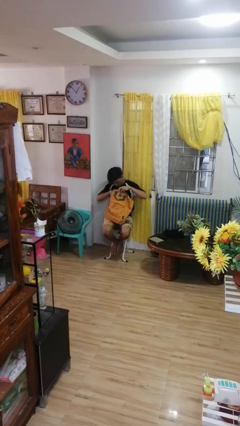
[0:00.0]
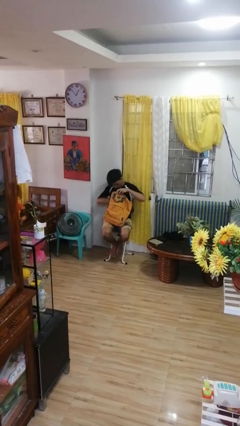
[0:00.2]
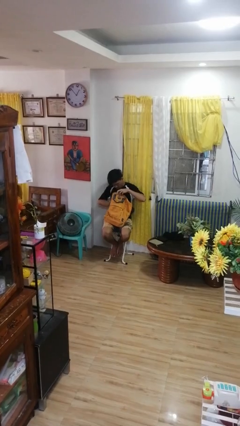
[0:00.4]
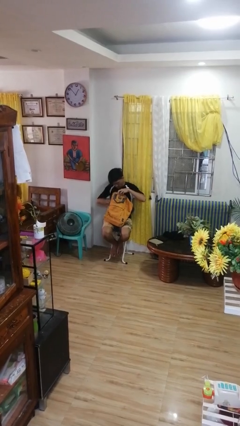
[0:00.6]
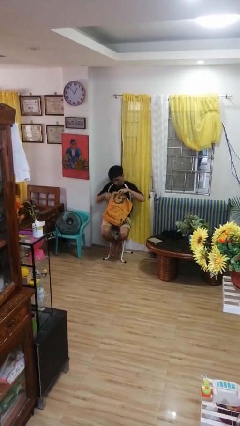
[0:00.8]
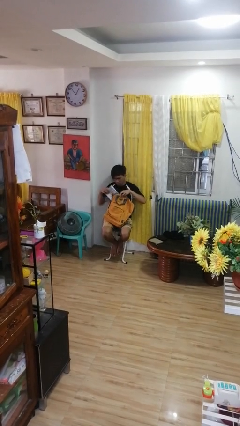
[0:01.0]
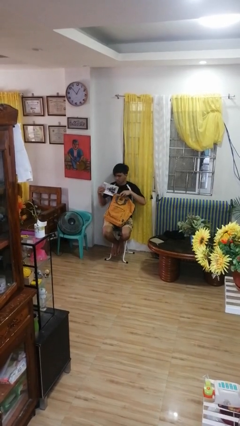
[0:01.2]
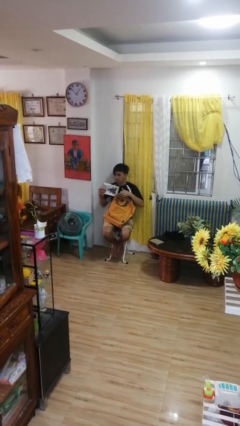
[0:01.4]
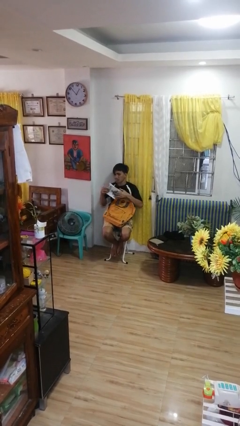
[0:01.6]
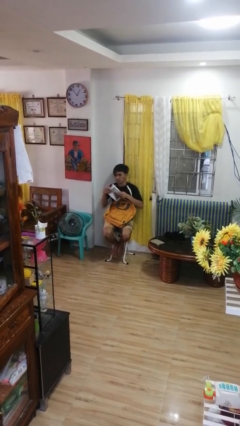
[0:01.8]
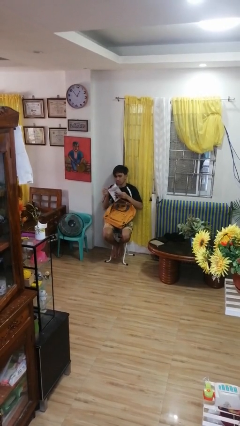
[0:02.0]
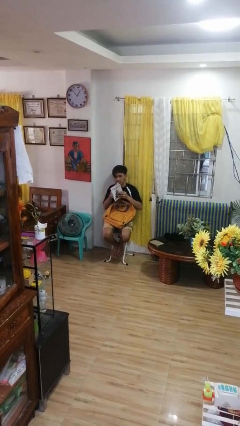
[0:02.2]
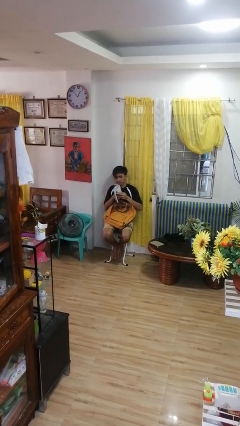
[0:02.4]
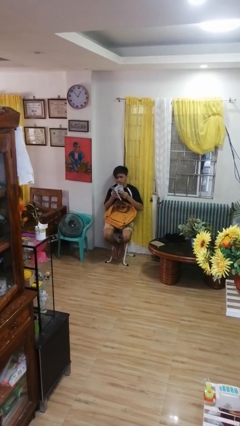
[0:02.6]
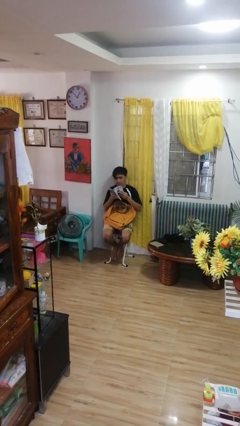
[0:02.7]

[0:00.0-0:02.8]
person takes object from backpack

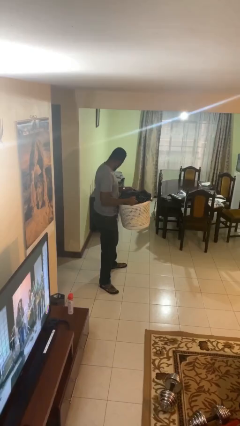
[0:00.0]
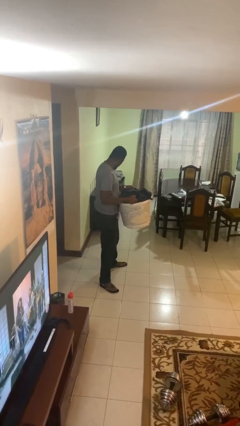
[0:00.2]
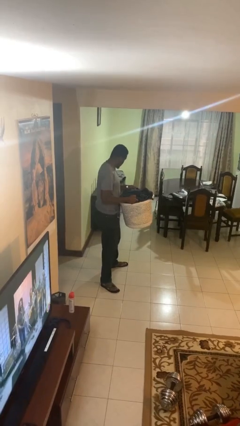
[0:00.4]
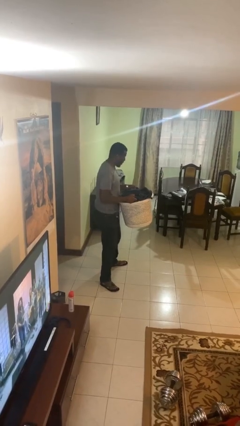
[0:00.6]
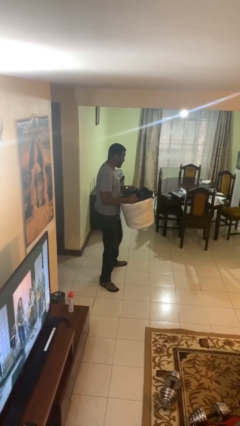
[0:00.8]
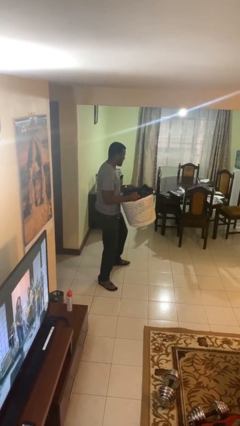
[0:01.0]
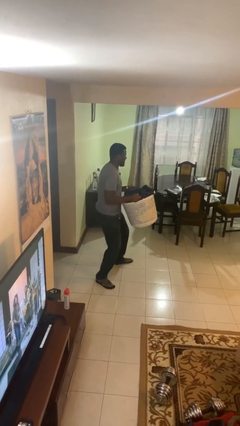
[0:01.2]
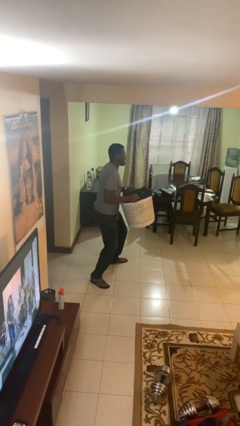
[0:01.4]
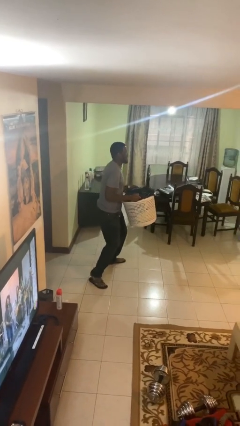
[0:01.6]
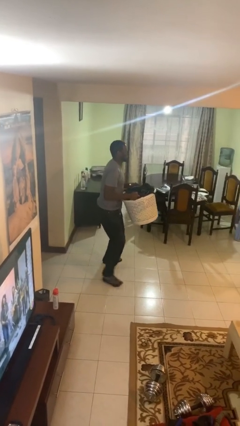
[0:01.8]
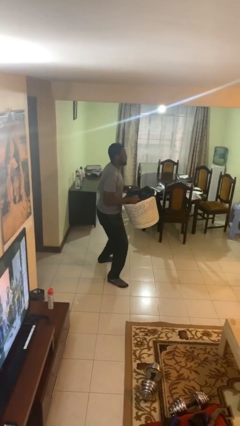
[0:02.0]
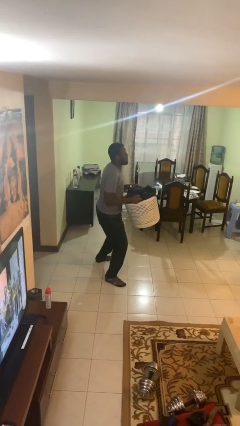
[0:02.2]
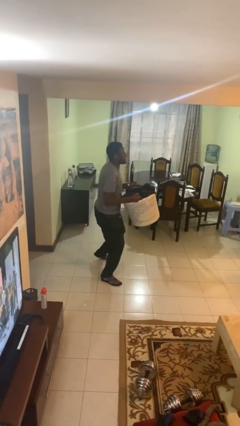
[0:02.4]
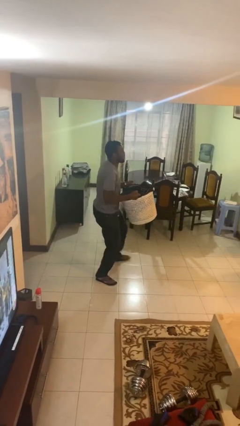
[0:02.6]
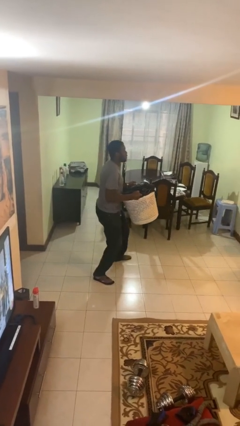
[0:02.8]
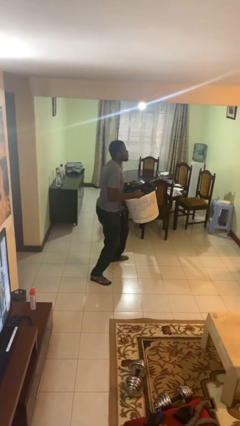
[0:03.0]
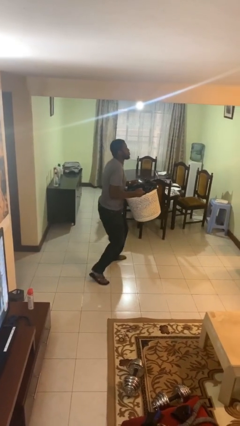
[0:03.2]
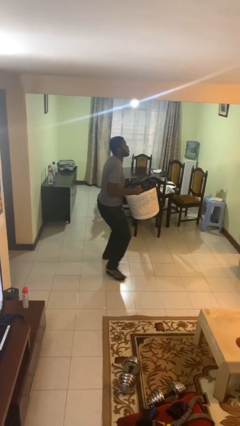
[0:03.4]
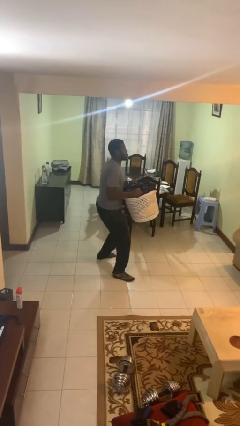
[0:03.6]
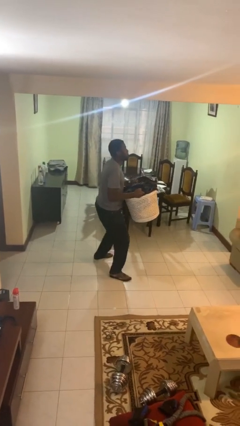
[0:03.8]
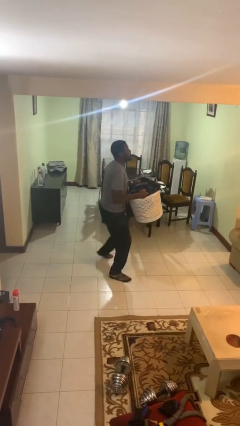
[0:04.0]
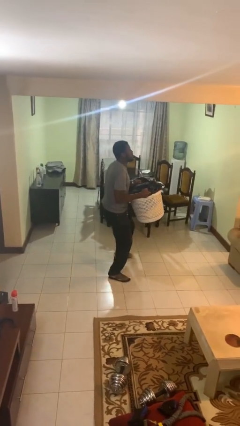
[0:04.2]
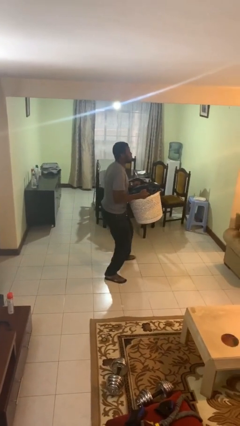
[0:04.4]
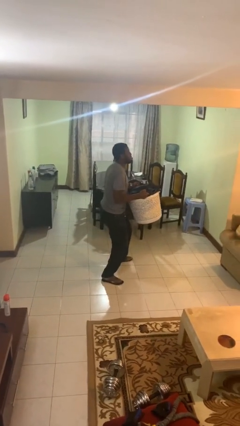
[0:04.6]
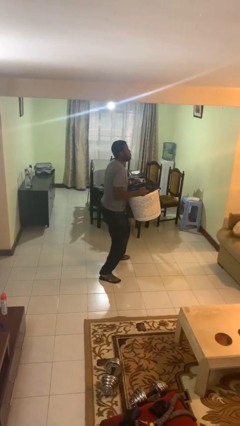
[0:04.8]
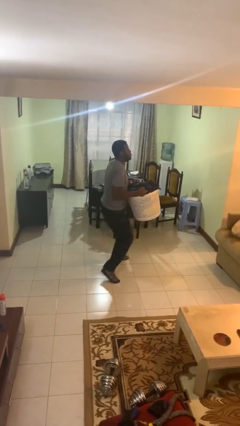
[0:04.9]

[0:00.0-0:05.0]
person carries heavy object

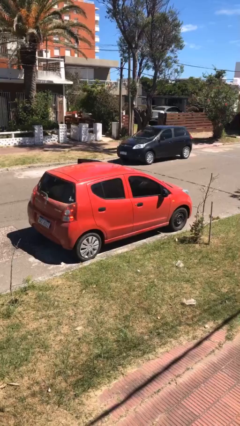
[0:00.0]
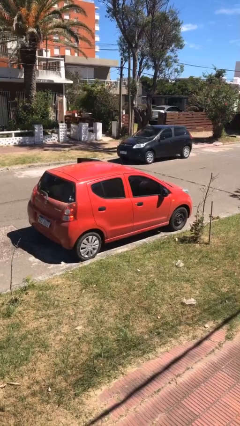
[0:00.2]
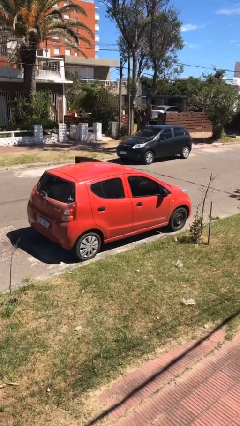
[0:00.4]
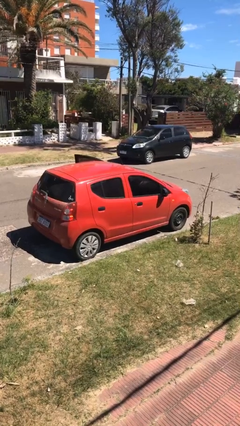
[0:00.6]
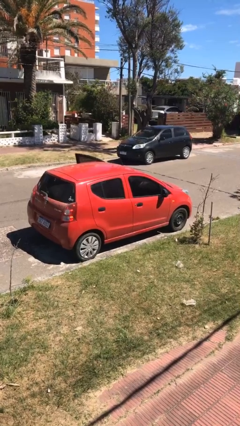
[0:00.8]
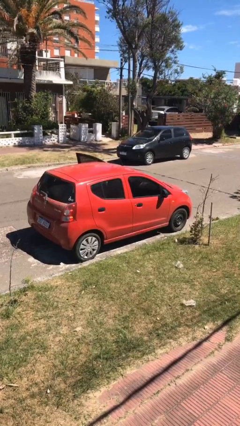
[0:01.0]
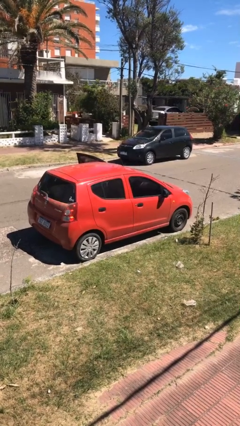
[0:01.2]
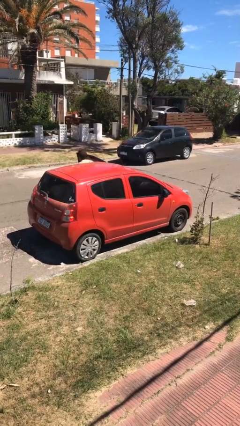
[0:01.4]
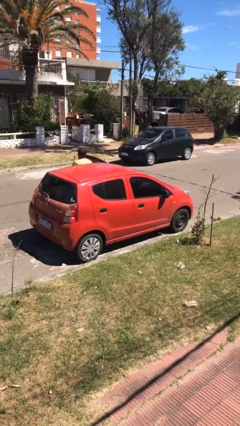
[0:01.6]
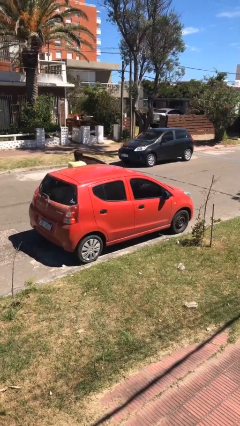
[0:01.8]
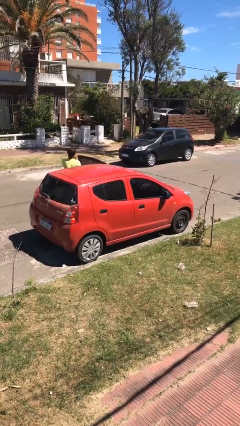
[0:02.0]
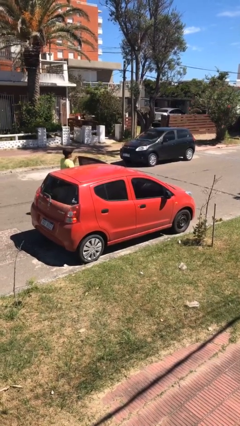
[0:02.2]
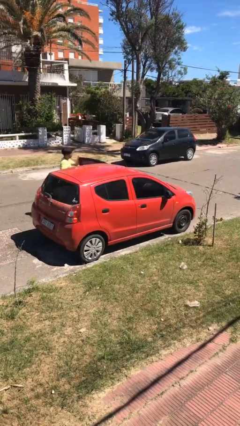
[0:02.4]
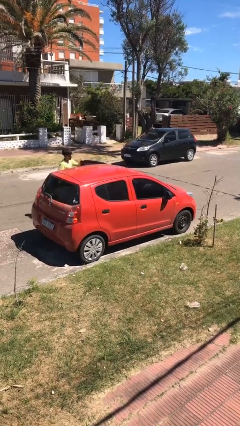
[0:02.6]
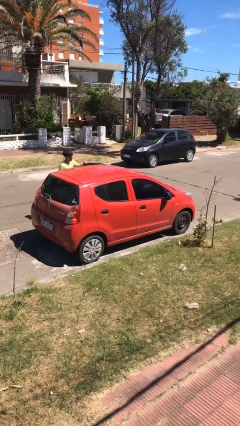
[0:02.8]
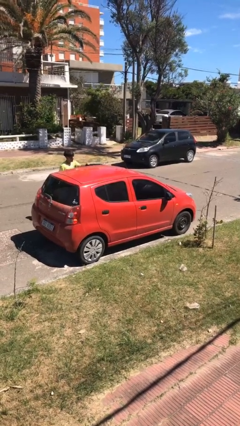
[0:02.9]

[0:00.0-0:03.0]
car drops off person

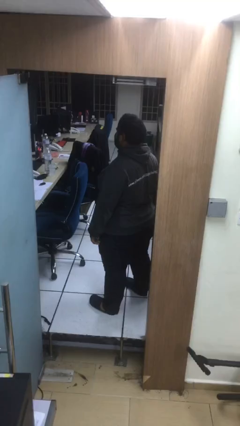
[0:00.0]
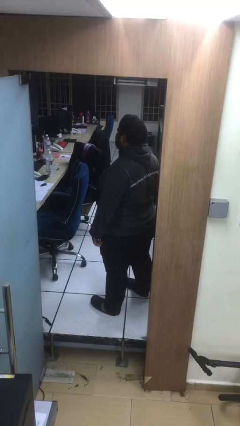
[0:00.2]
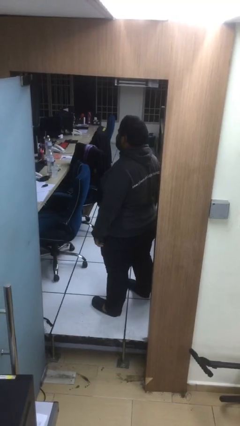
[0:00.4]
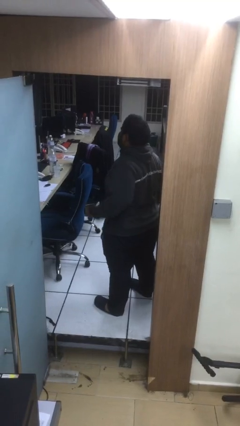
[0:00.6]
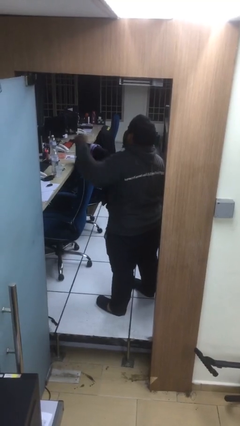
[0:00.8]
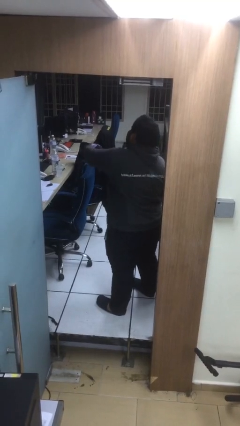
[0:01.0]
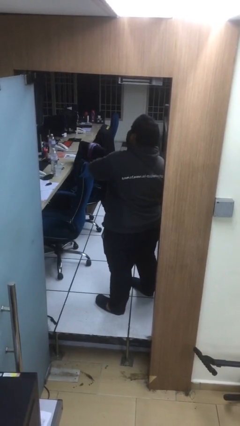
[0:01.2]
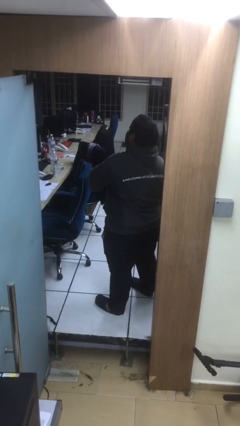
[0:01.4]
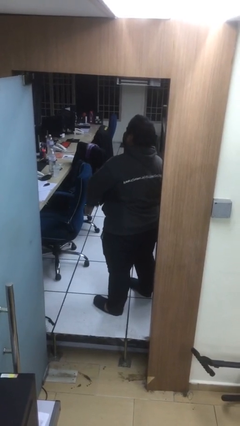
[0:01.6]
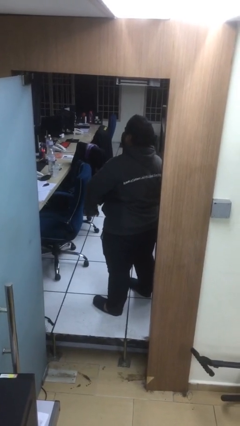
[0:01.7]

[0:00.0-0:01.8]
person punches

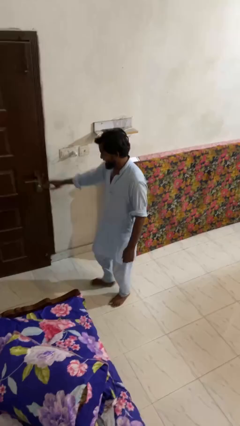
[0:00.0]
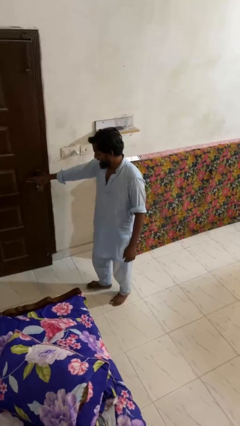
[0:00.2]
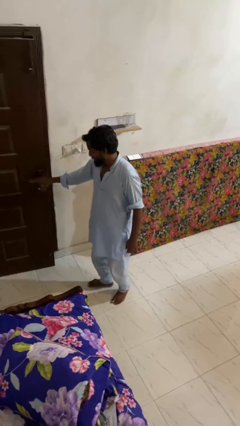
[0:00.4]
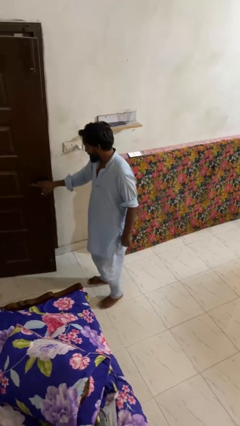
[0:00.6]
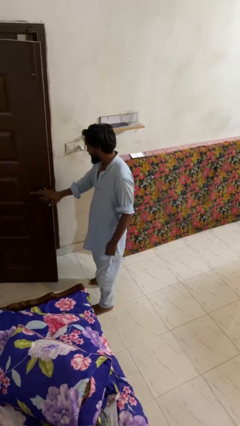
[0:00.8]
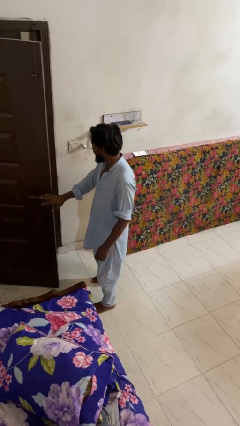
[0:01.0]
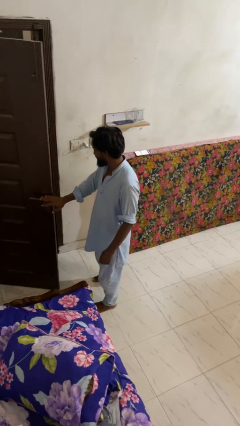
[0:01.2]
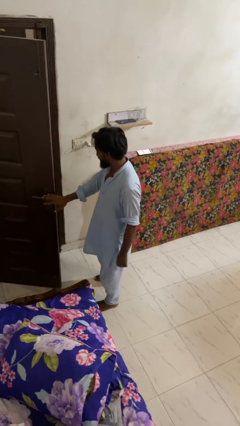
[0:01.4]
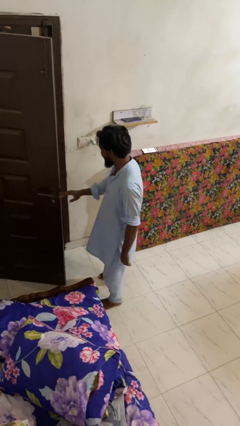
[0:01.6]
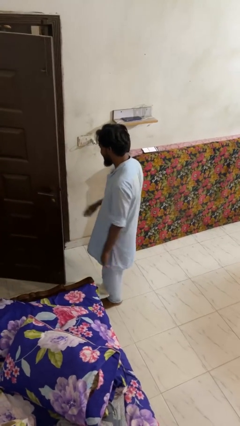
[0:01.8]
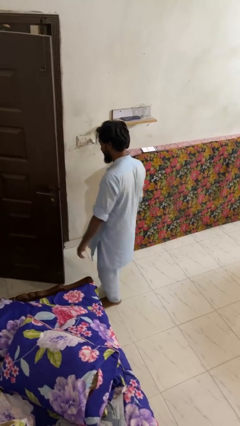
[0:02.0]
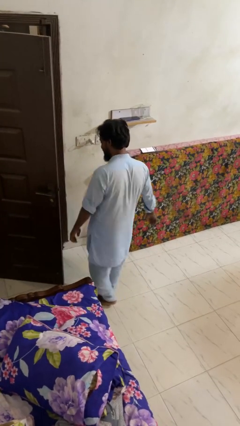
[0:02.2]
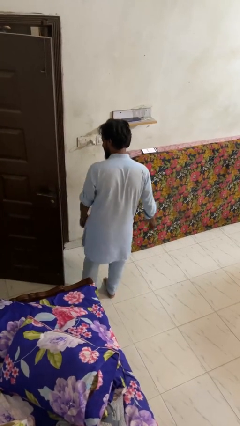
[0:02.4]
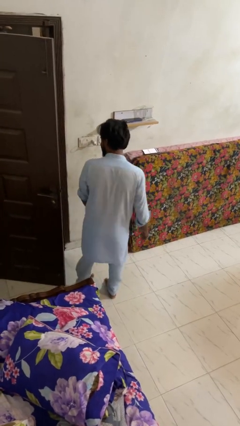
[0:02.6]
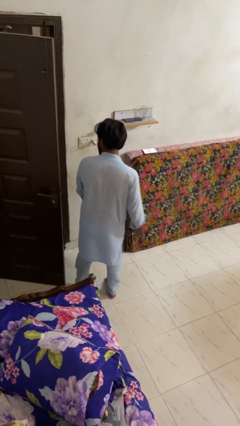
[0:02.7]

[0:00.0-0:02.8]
person opens facility door

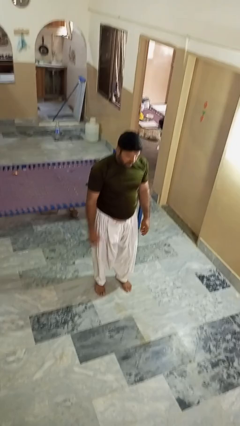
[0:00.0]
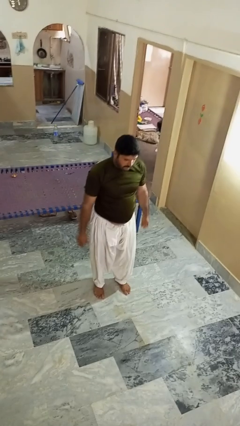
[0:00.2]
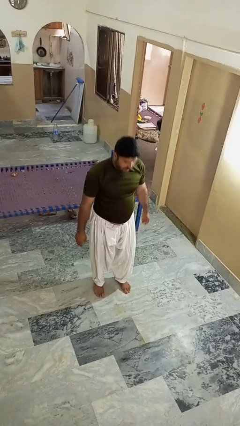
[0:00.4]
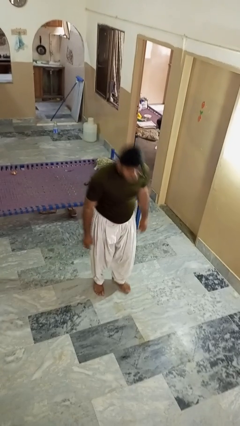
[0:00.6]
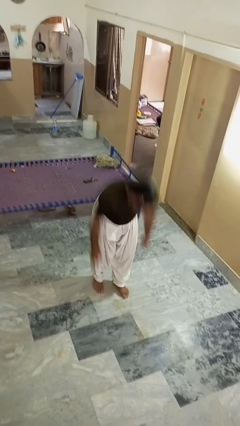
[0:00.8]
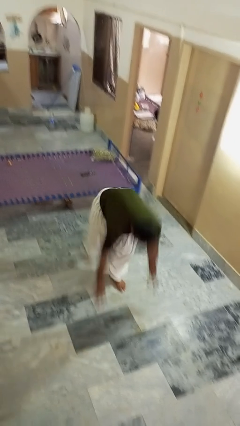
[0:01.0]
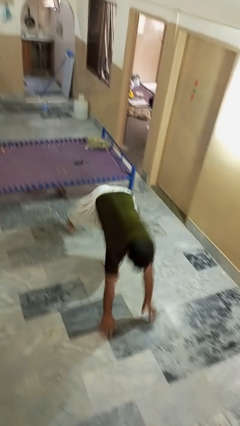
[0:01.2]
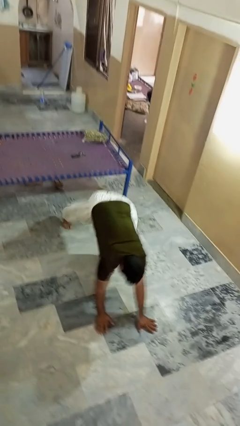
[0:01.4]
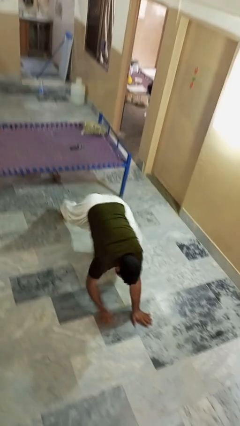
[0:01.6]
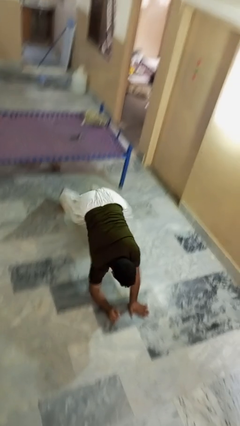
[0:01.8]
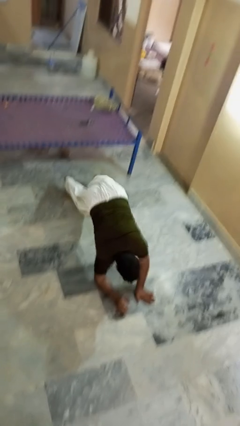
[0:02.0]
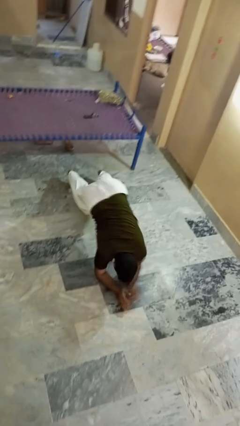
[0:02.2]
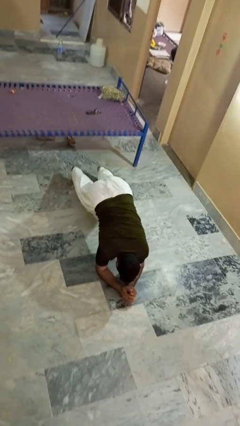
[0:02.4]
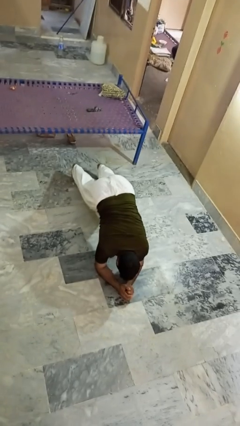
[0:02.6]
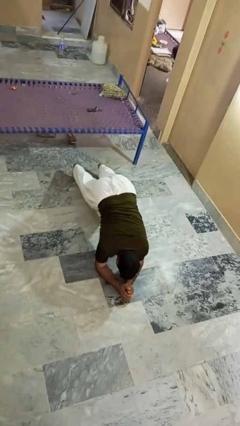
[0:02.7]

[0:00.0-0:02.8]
person exercises with plank
